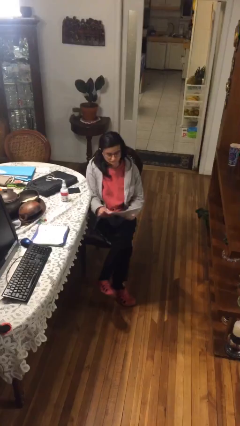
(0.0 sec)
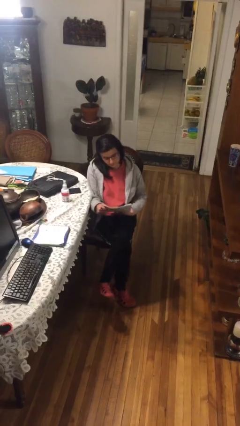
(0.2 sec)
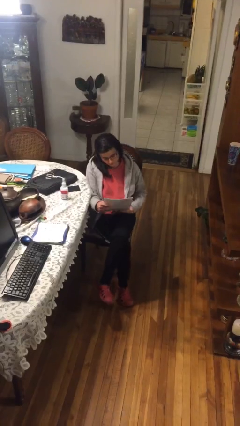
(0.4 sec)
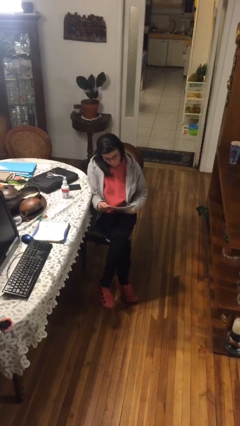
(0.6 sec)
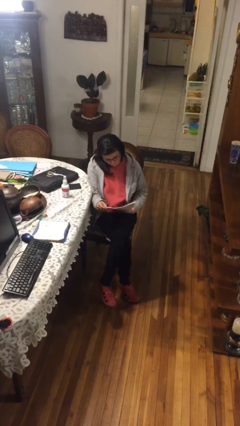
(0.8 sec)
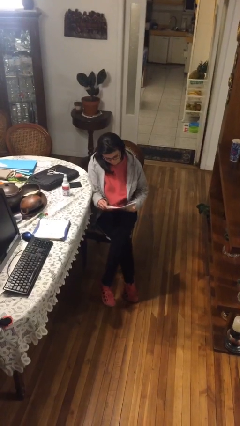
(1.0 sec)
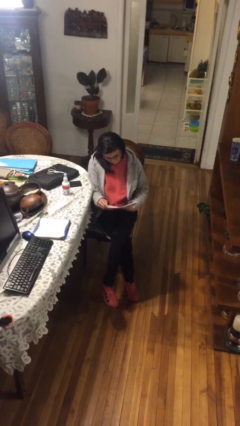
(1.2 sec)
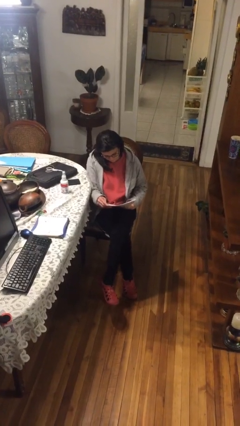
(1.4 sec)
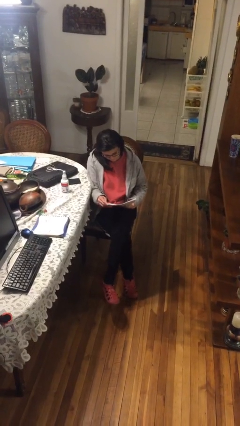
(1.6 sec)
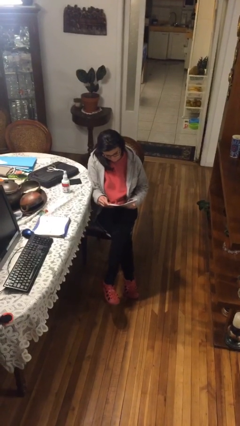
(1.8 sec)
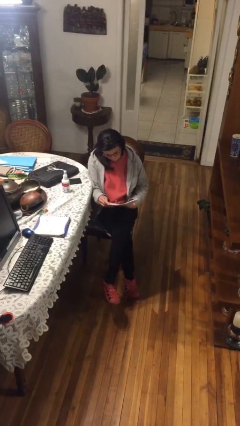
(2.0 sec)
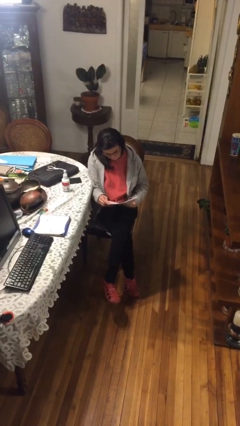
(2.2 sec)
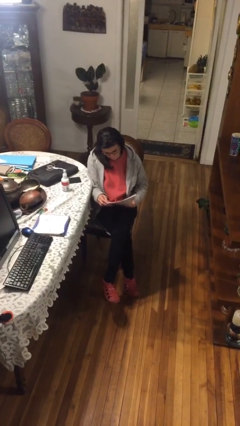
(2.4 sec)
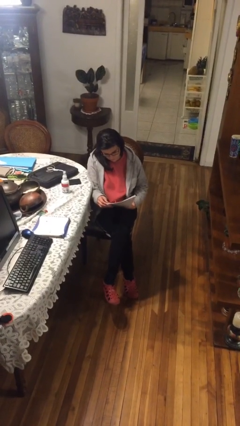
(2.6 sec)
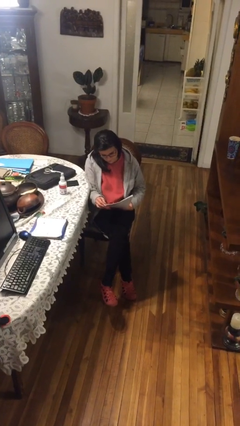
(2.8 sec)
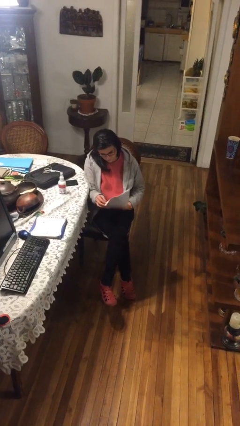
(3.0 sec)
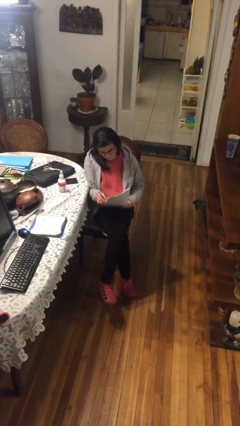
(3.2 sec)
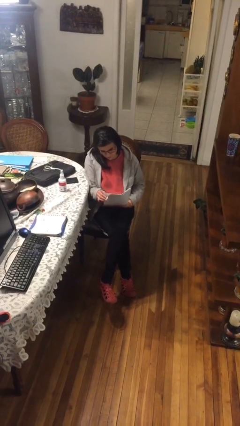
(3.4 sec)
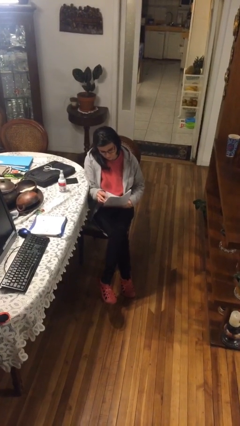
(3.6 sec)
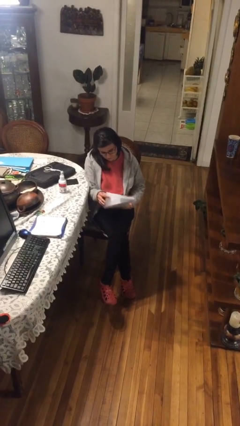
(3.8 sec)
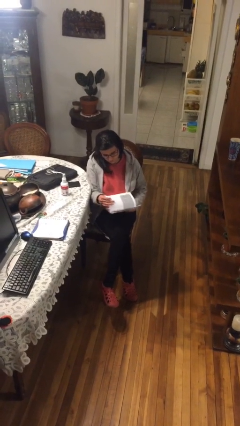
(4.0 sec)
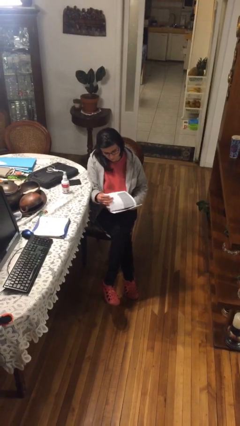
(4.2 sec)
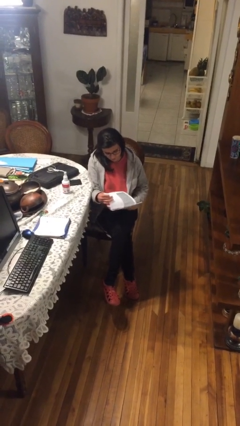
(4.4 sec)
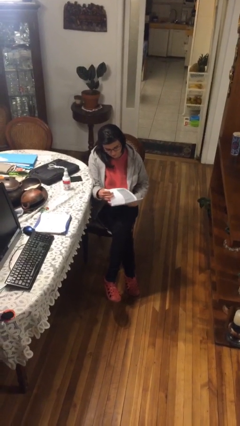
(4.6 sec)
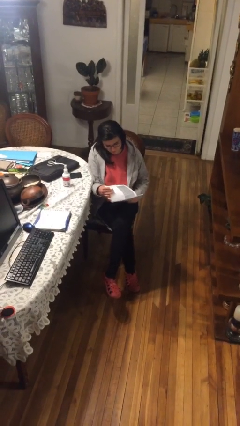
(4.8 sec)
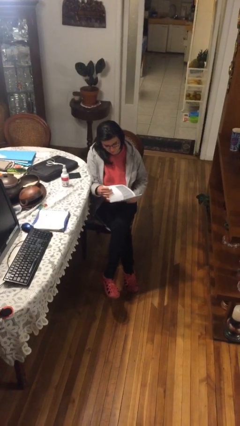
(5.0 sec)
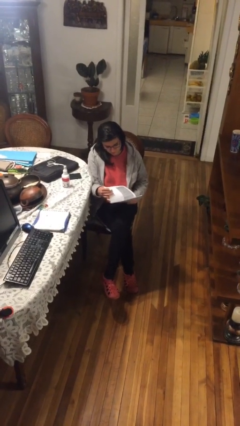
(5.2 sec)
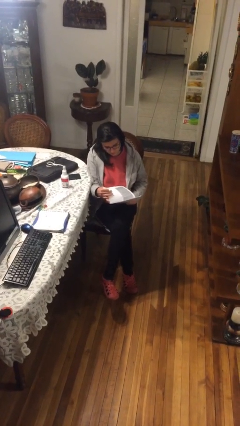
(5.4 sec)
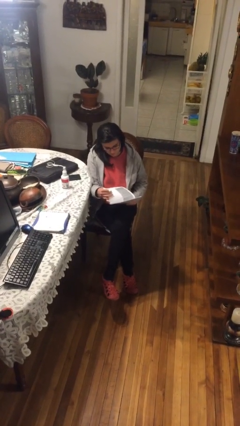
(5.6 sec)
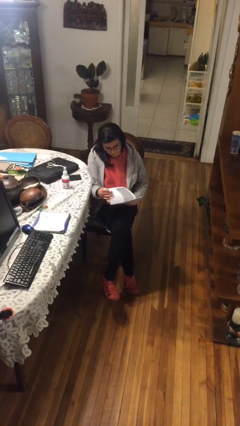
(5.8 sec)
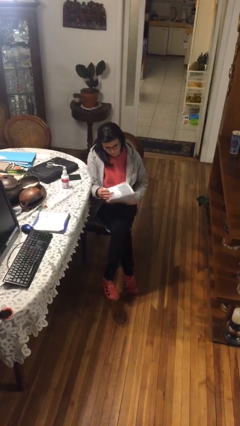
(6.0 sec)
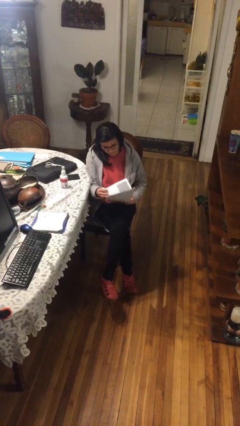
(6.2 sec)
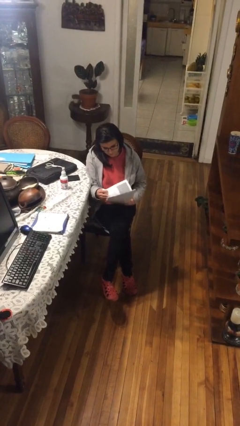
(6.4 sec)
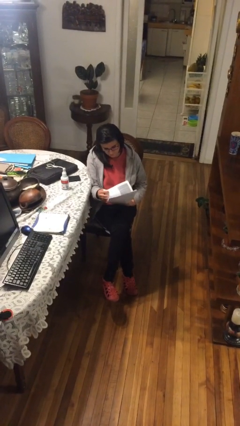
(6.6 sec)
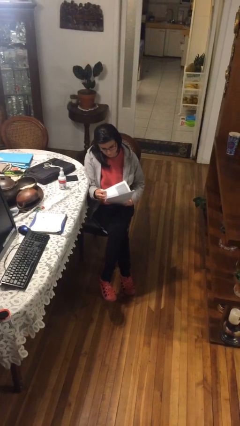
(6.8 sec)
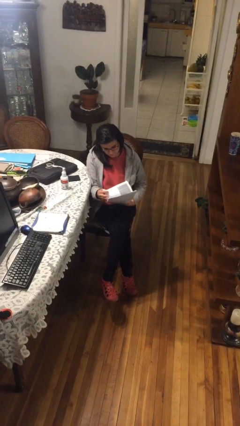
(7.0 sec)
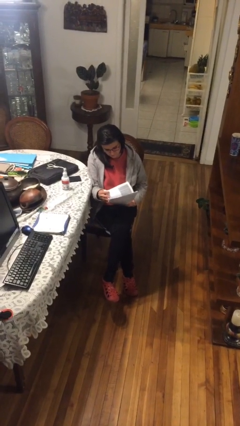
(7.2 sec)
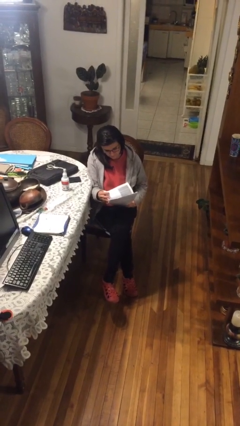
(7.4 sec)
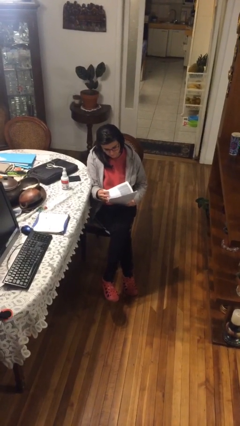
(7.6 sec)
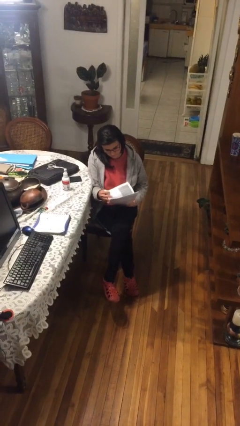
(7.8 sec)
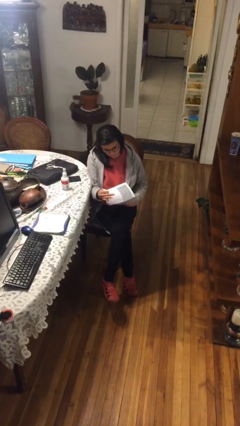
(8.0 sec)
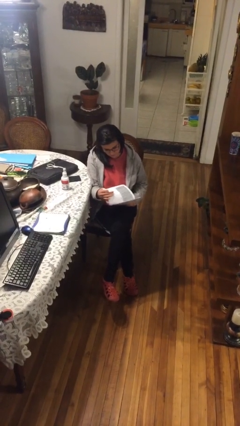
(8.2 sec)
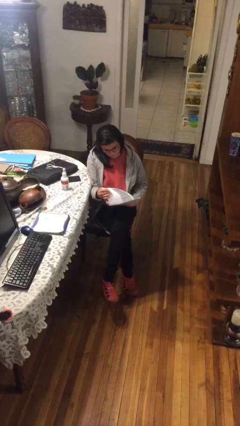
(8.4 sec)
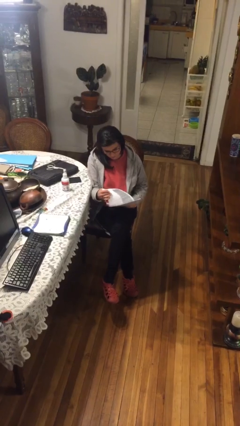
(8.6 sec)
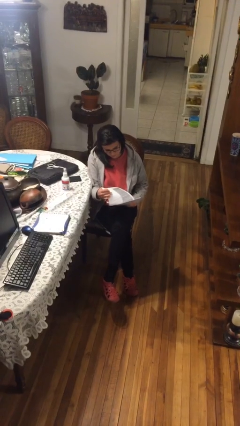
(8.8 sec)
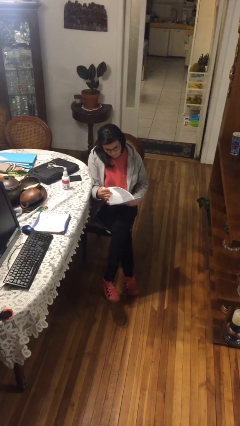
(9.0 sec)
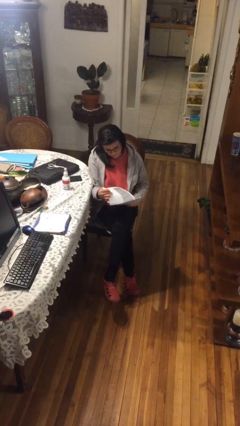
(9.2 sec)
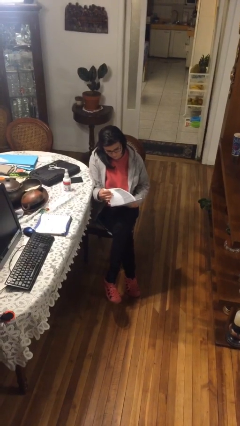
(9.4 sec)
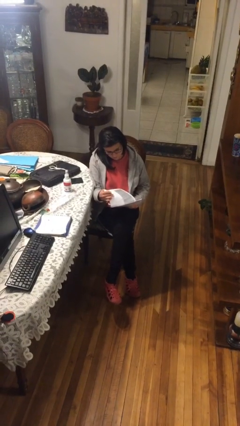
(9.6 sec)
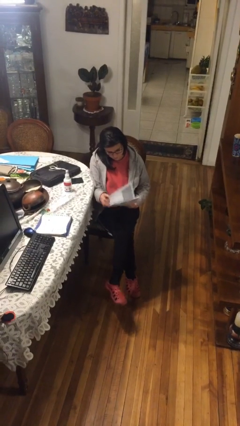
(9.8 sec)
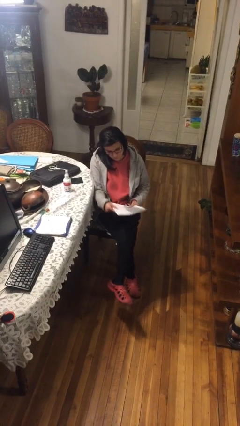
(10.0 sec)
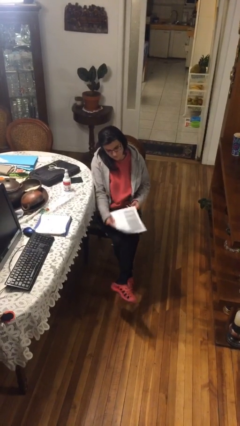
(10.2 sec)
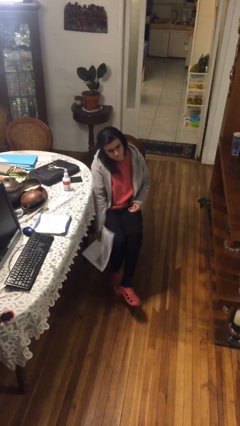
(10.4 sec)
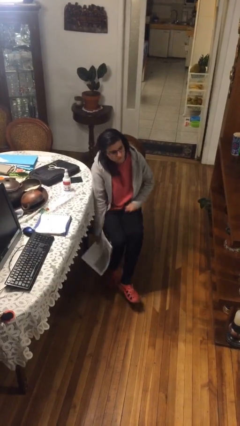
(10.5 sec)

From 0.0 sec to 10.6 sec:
person reads document

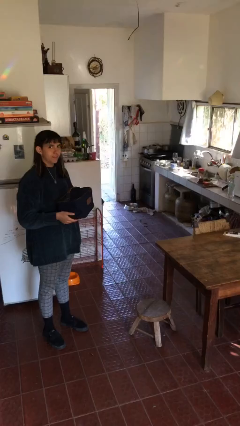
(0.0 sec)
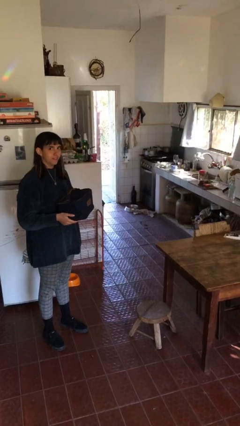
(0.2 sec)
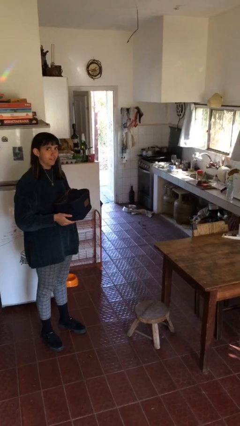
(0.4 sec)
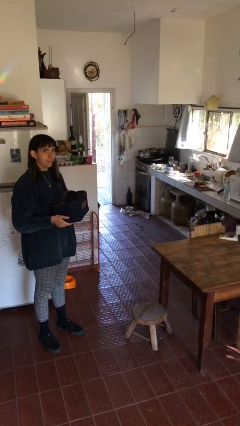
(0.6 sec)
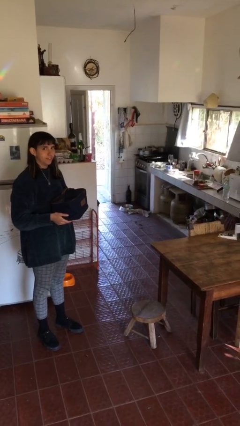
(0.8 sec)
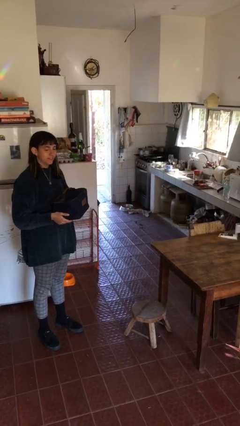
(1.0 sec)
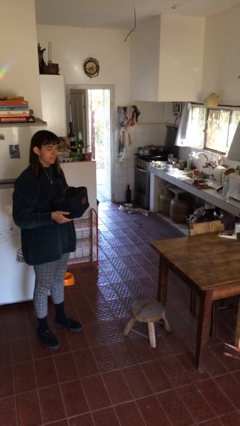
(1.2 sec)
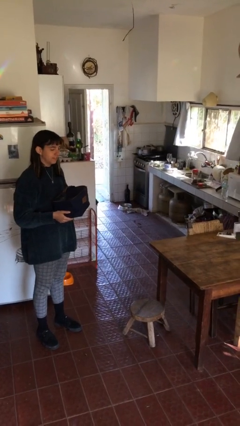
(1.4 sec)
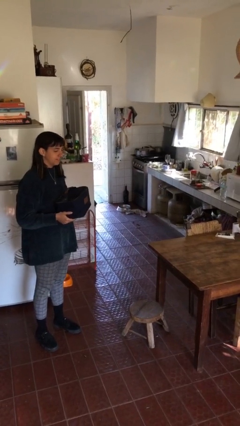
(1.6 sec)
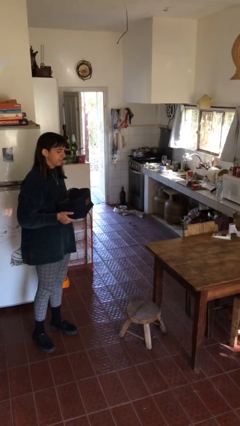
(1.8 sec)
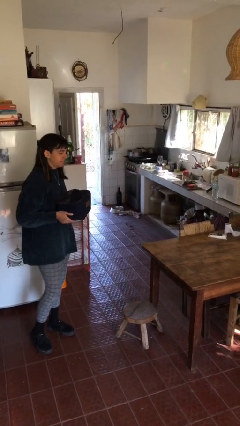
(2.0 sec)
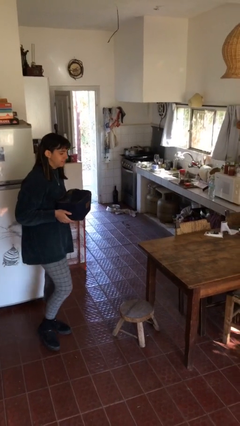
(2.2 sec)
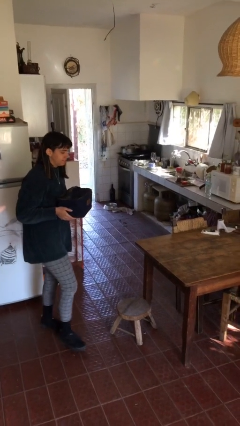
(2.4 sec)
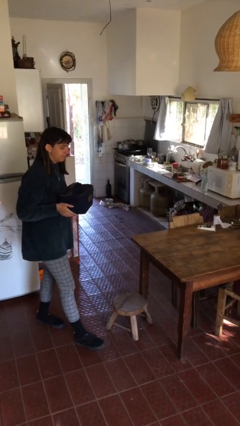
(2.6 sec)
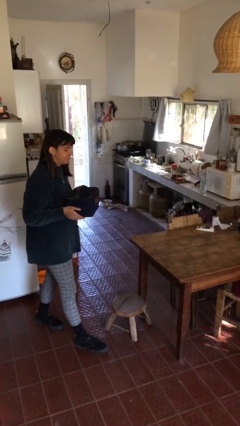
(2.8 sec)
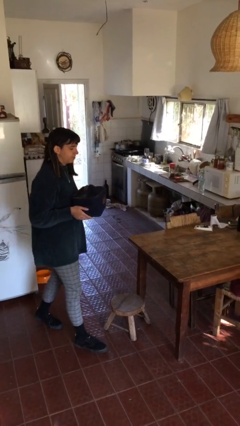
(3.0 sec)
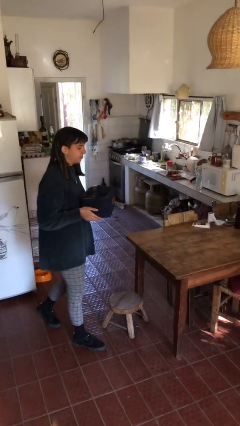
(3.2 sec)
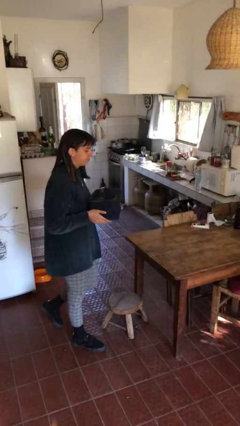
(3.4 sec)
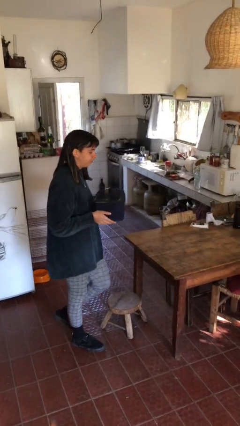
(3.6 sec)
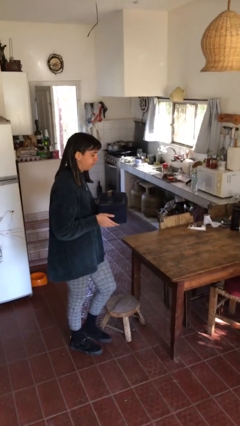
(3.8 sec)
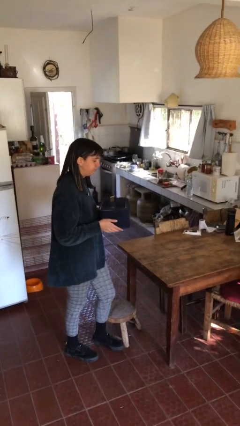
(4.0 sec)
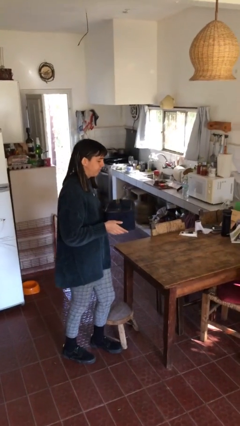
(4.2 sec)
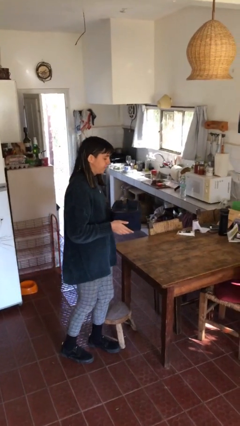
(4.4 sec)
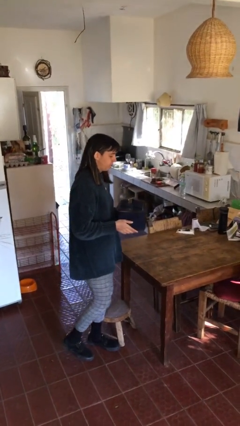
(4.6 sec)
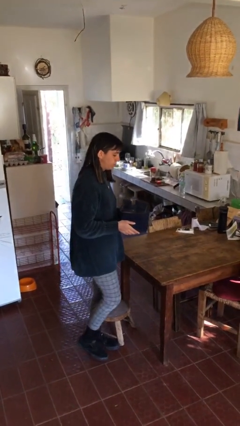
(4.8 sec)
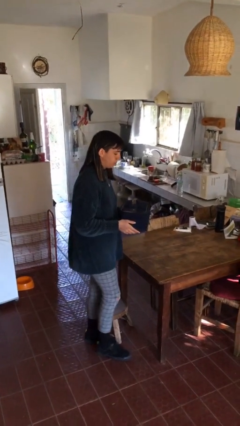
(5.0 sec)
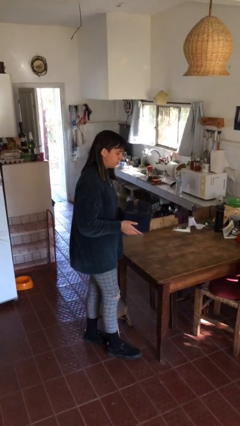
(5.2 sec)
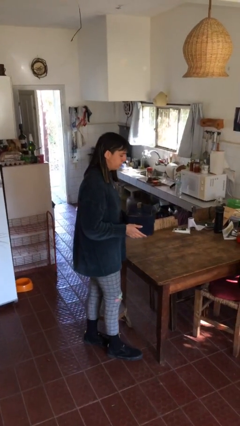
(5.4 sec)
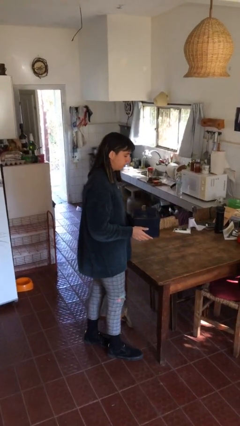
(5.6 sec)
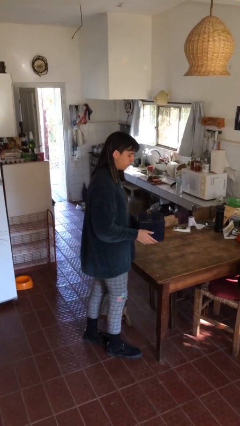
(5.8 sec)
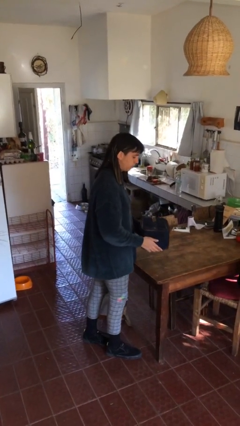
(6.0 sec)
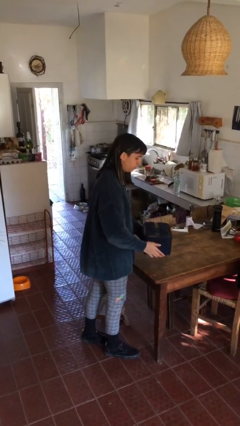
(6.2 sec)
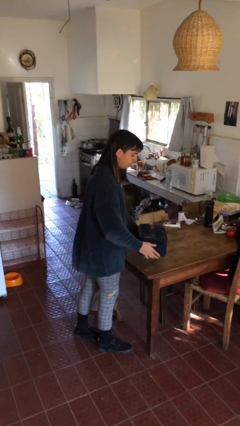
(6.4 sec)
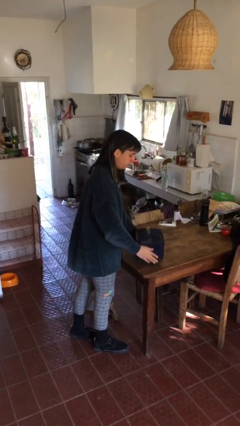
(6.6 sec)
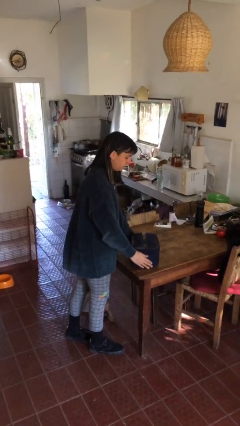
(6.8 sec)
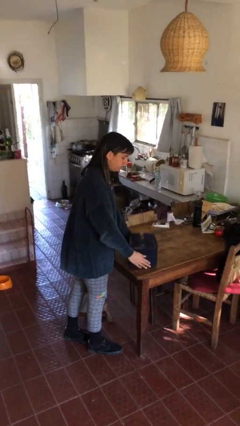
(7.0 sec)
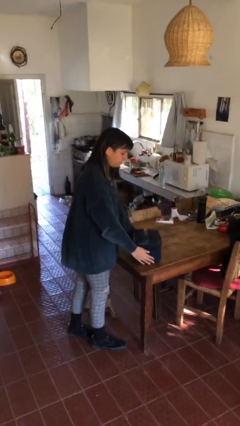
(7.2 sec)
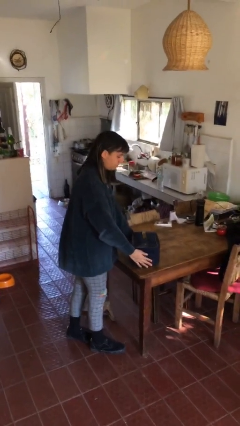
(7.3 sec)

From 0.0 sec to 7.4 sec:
person puts down object on table
